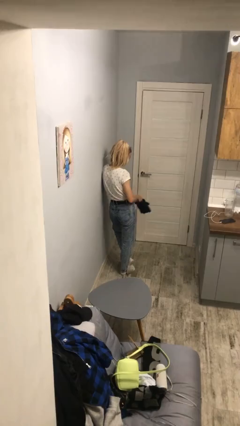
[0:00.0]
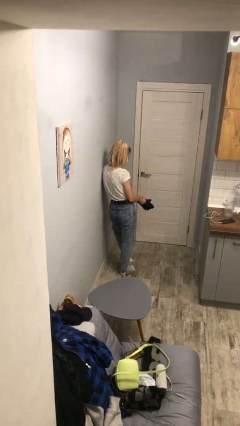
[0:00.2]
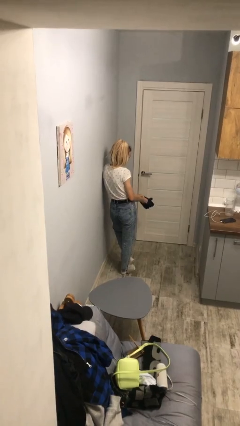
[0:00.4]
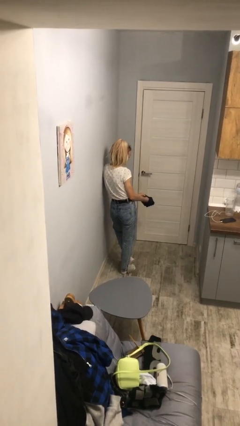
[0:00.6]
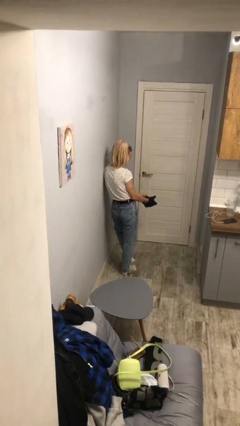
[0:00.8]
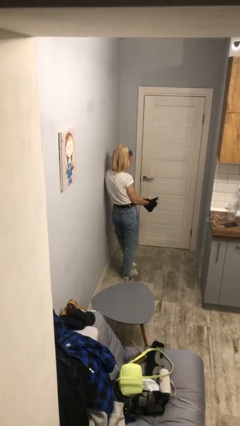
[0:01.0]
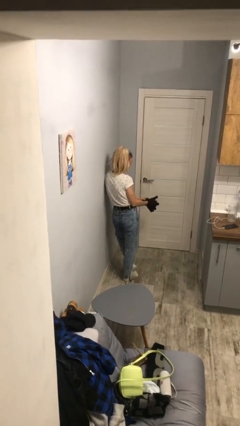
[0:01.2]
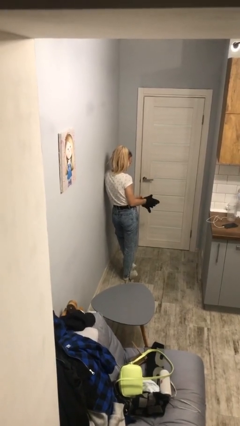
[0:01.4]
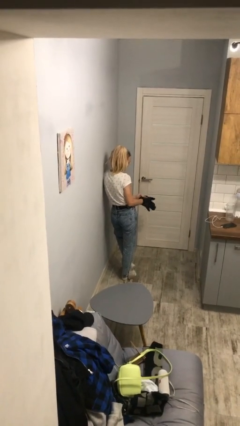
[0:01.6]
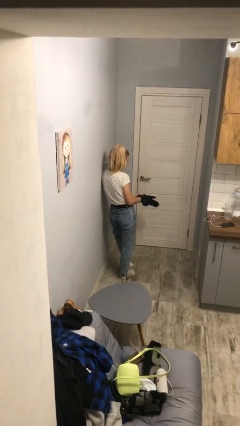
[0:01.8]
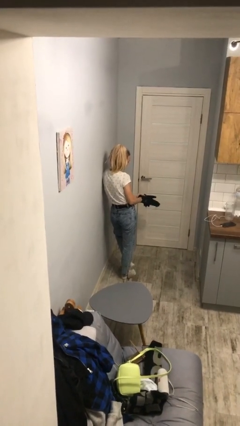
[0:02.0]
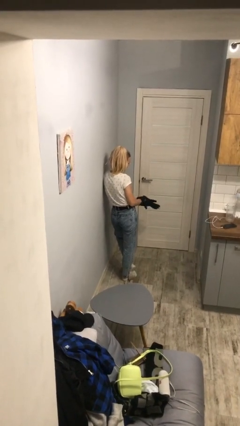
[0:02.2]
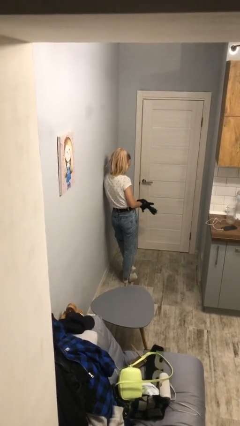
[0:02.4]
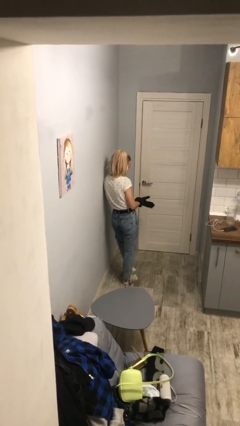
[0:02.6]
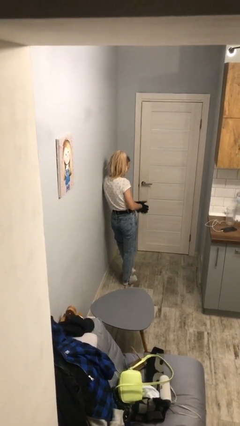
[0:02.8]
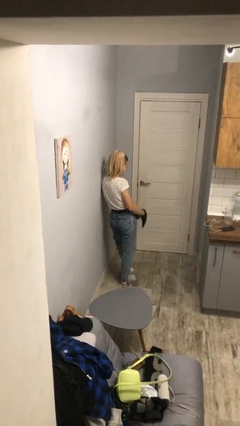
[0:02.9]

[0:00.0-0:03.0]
person puts on gloves

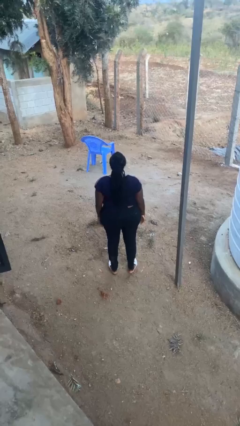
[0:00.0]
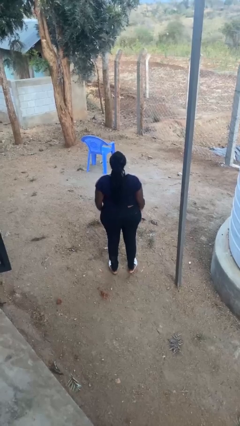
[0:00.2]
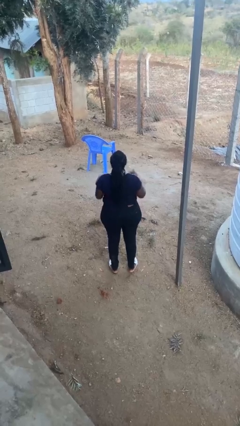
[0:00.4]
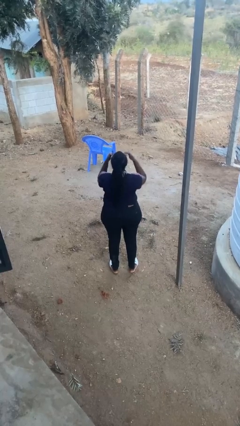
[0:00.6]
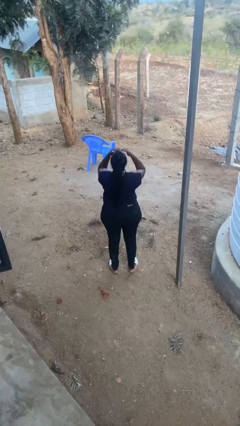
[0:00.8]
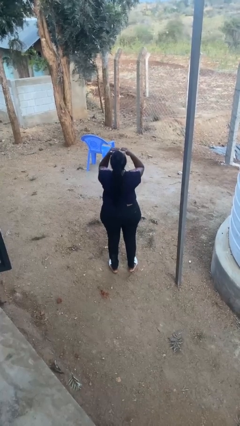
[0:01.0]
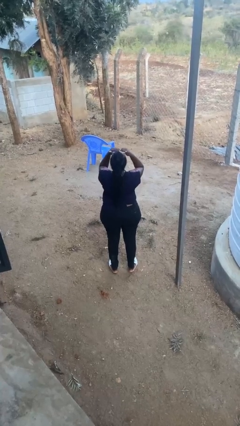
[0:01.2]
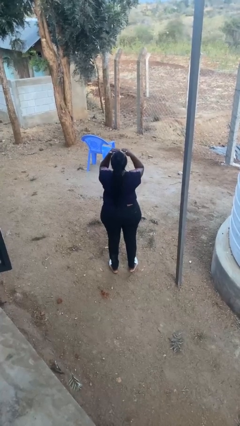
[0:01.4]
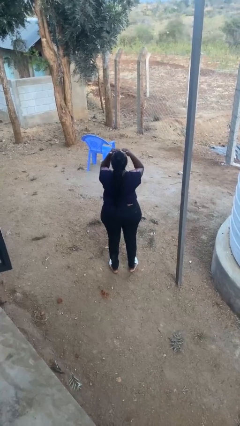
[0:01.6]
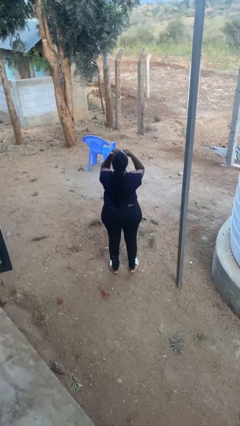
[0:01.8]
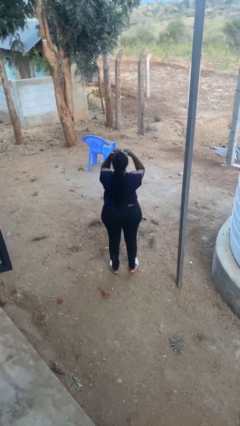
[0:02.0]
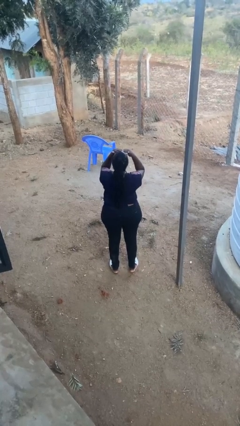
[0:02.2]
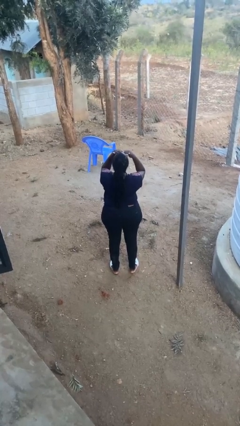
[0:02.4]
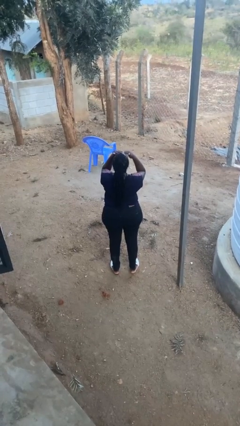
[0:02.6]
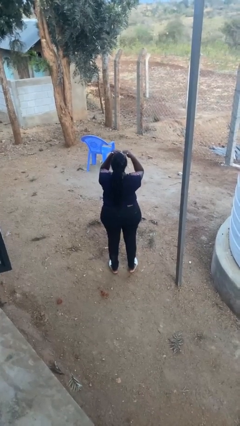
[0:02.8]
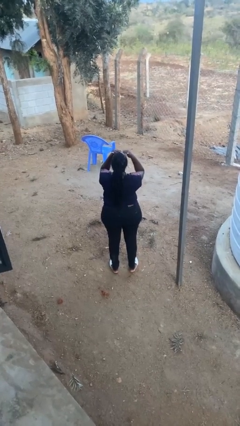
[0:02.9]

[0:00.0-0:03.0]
person shades eyes

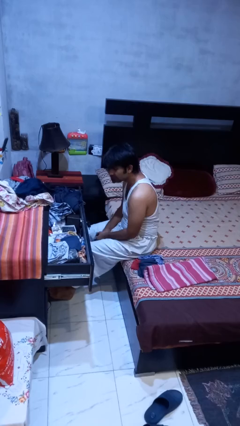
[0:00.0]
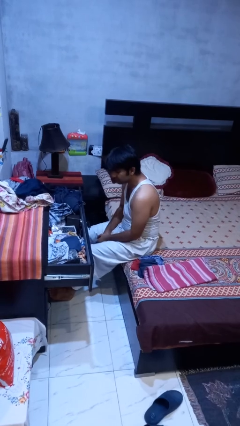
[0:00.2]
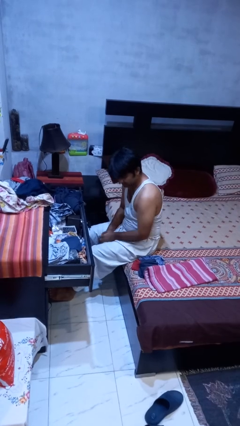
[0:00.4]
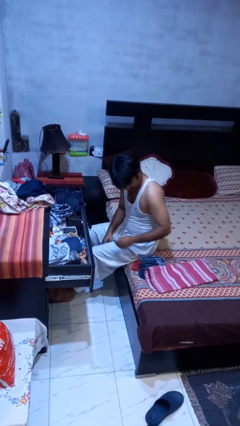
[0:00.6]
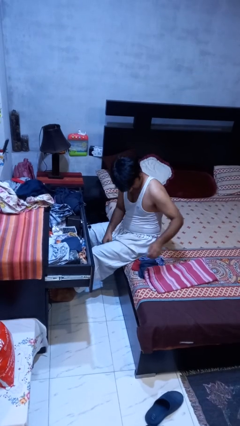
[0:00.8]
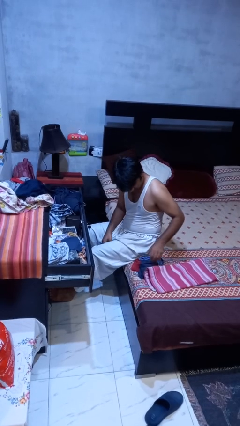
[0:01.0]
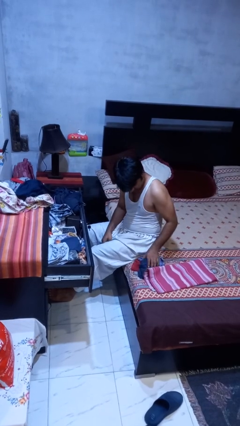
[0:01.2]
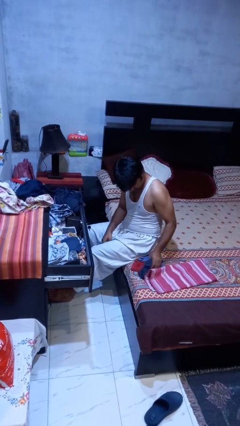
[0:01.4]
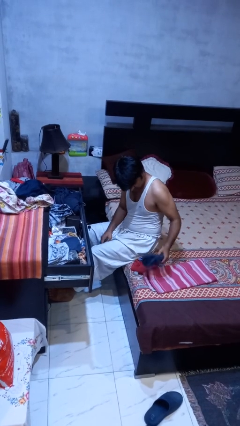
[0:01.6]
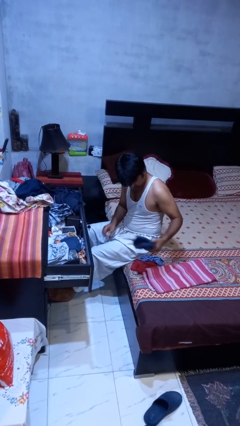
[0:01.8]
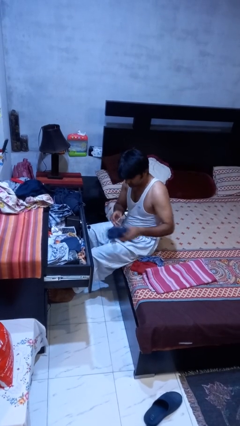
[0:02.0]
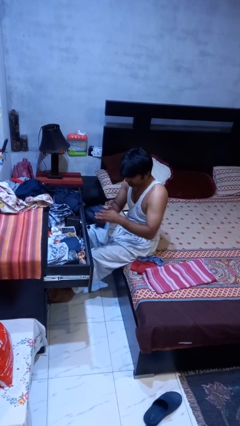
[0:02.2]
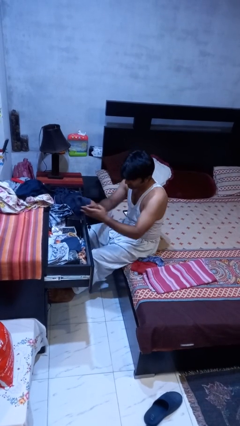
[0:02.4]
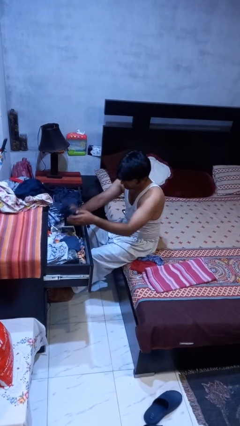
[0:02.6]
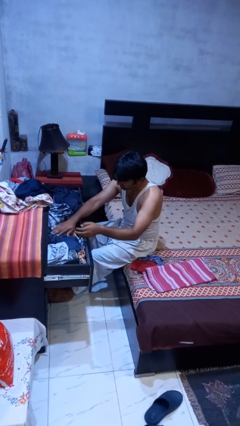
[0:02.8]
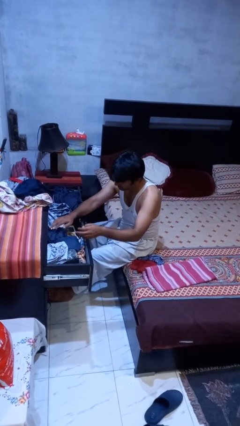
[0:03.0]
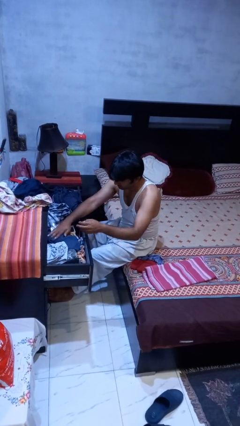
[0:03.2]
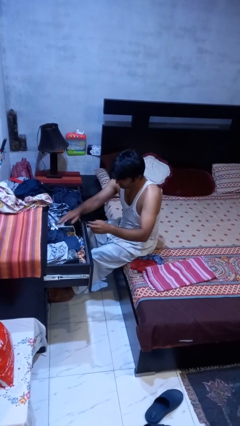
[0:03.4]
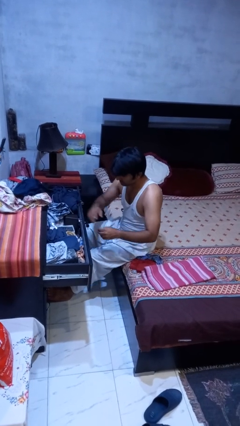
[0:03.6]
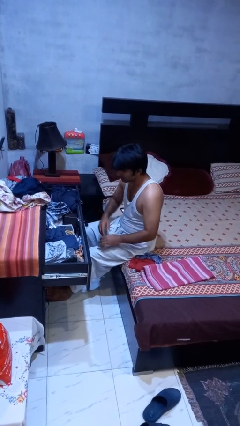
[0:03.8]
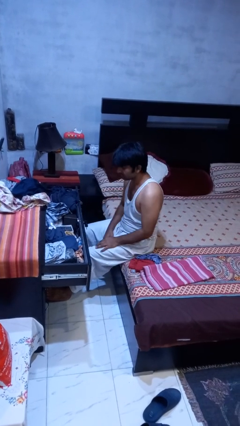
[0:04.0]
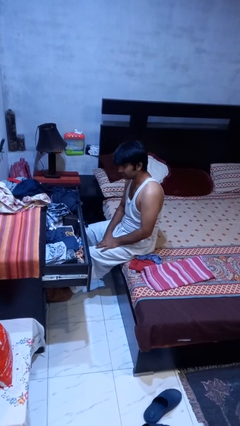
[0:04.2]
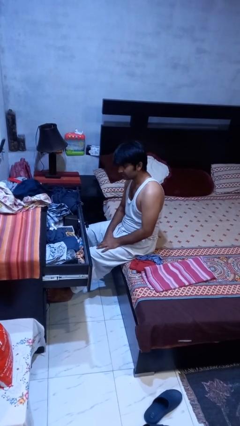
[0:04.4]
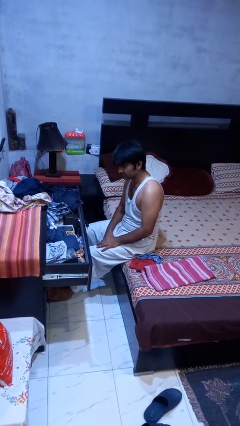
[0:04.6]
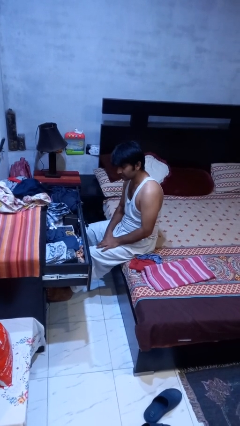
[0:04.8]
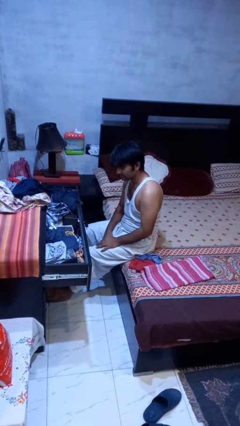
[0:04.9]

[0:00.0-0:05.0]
person puts clothes into dresser

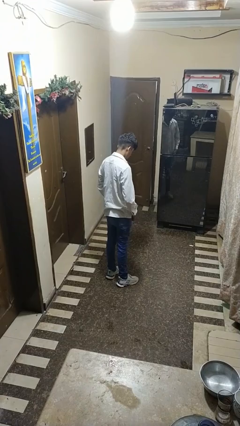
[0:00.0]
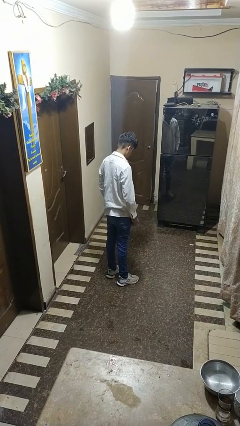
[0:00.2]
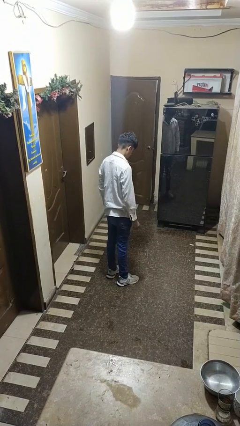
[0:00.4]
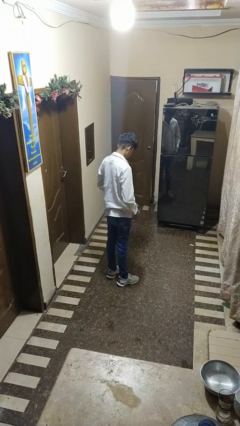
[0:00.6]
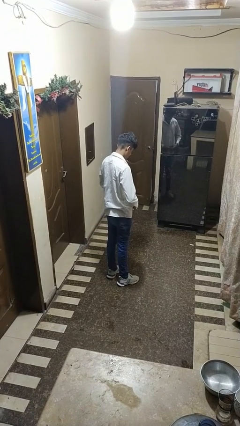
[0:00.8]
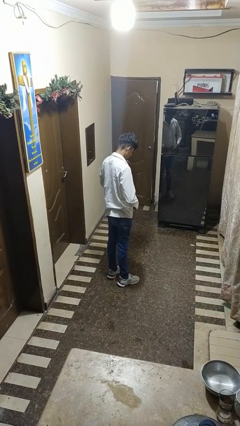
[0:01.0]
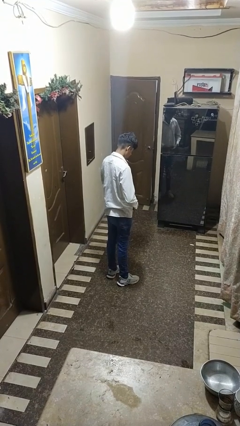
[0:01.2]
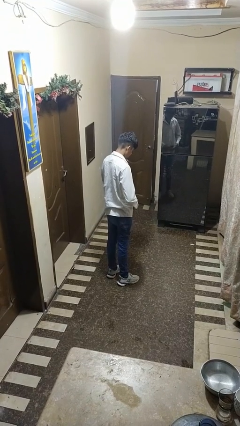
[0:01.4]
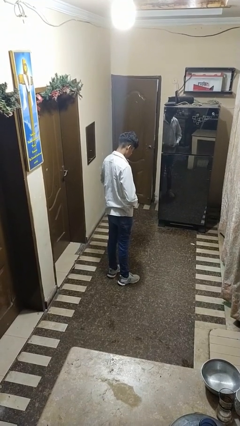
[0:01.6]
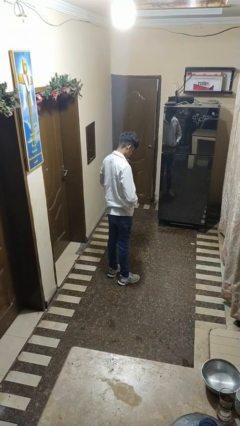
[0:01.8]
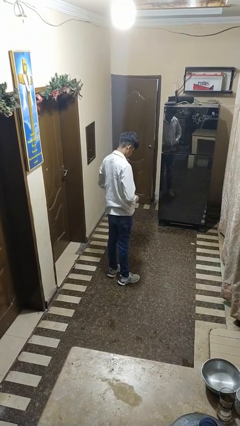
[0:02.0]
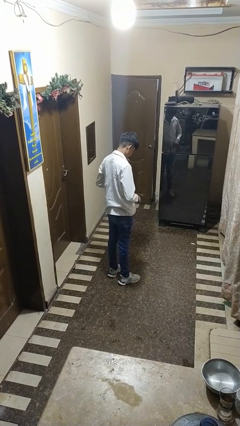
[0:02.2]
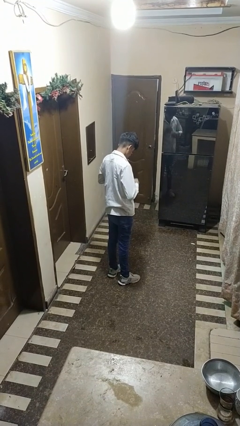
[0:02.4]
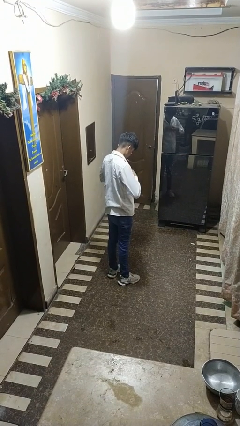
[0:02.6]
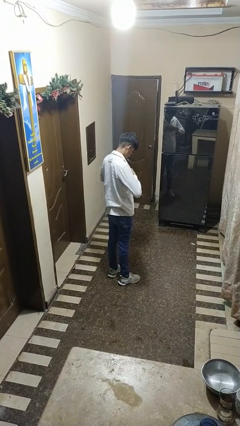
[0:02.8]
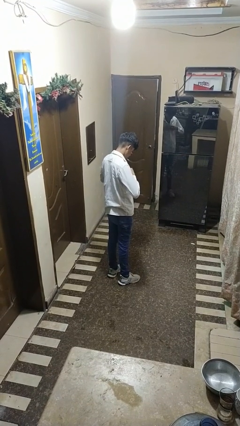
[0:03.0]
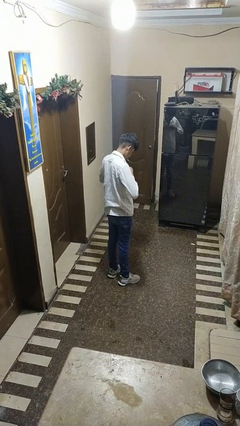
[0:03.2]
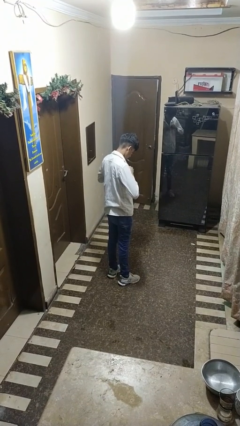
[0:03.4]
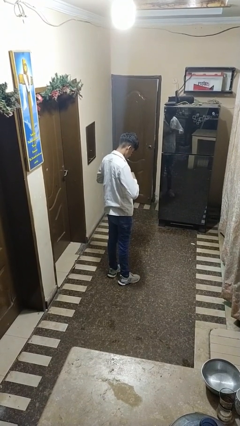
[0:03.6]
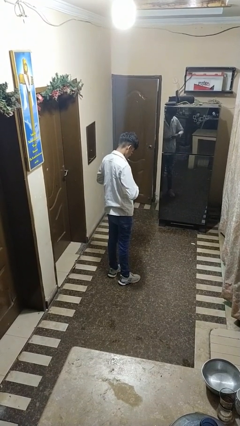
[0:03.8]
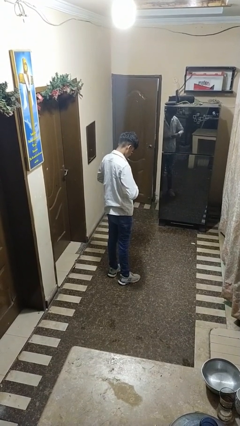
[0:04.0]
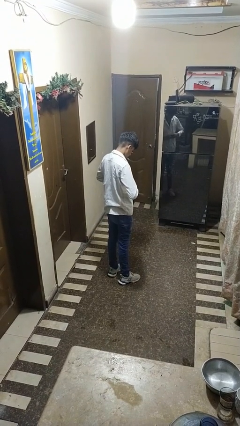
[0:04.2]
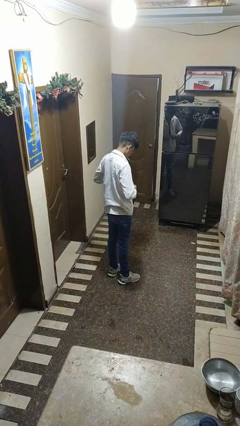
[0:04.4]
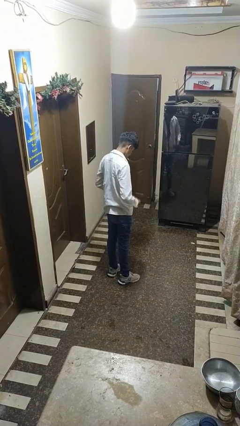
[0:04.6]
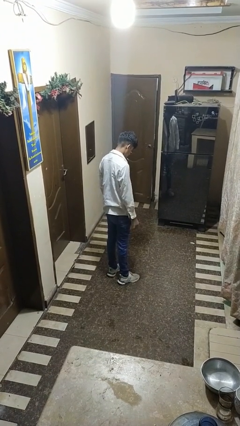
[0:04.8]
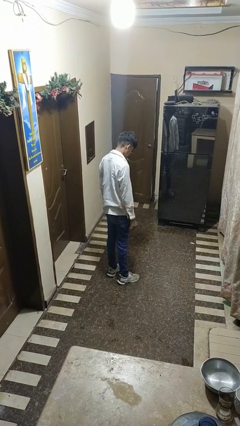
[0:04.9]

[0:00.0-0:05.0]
person unbuttons shirt

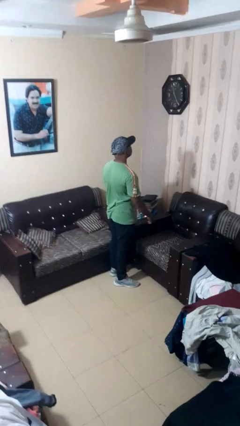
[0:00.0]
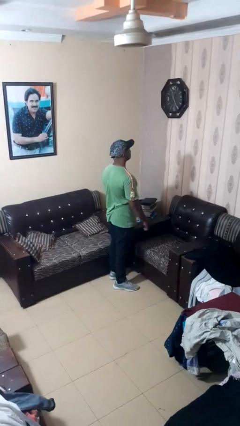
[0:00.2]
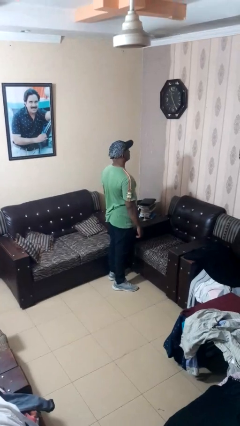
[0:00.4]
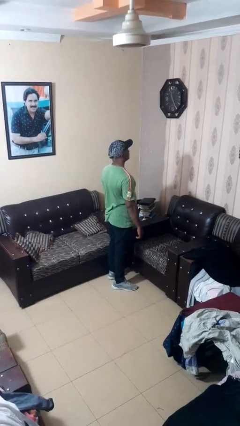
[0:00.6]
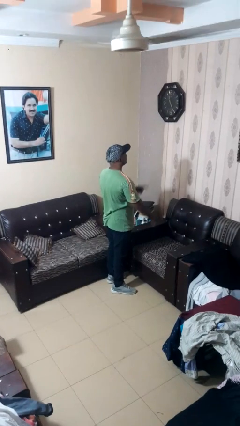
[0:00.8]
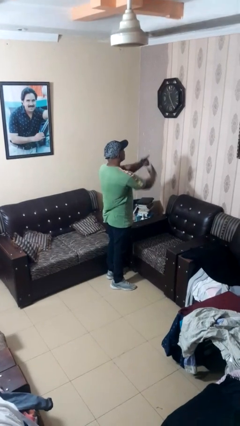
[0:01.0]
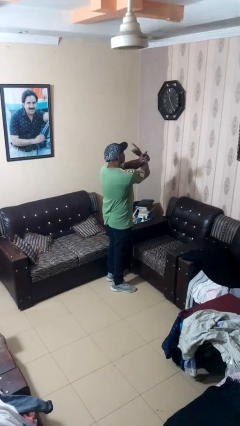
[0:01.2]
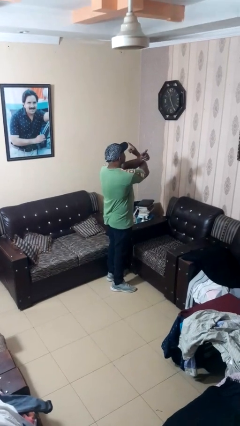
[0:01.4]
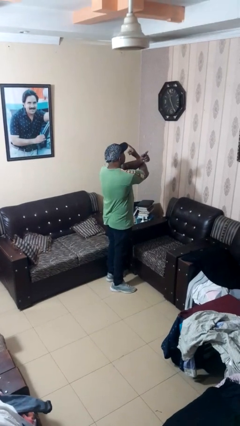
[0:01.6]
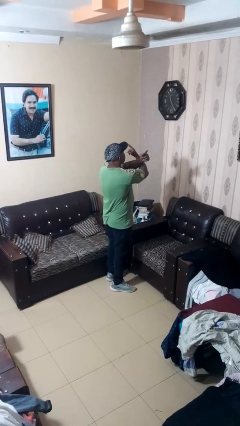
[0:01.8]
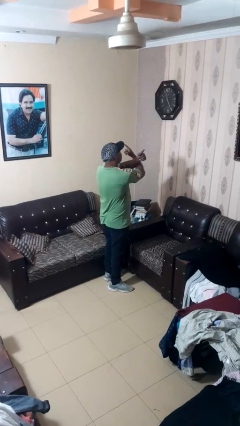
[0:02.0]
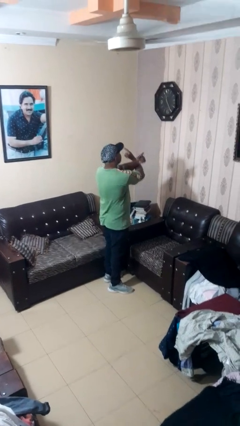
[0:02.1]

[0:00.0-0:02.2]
person gestures arms x
